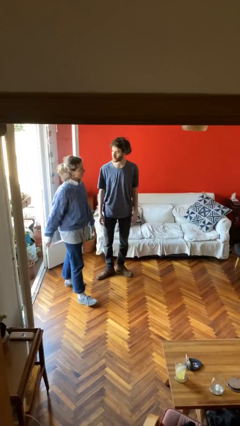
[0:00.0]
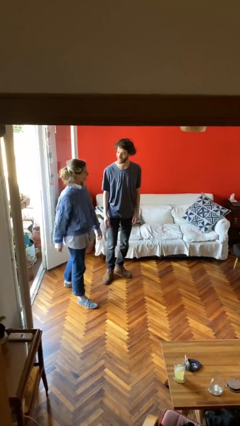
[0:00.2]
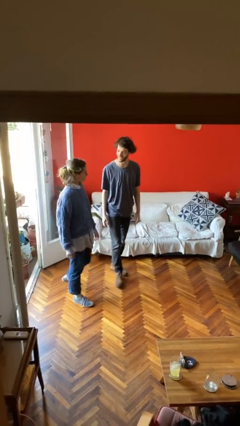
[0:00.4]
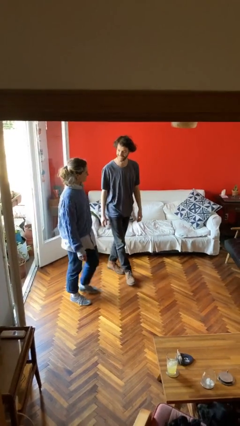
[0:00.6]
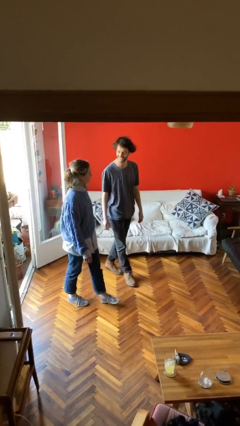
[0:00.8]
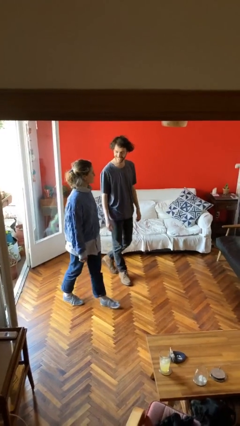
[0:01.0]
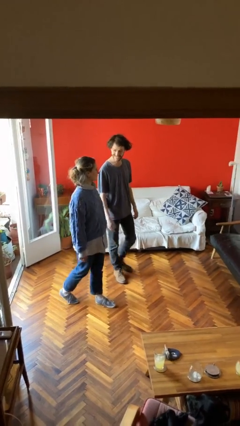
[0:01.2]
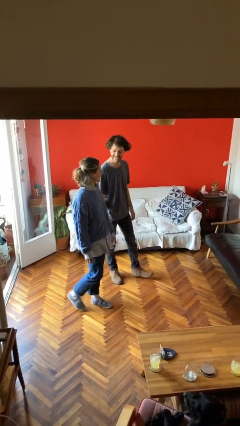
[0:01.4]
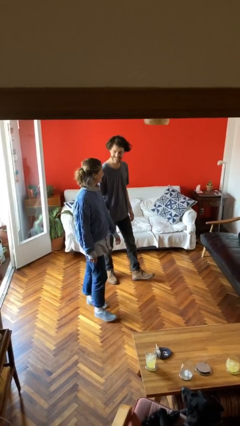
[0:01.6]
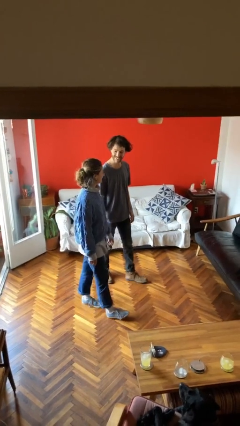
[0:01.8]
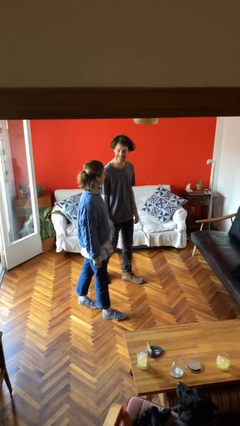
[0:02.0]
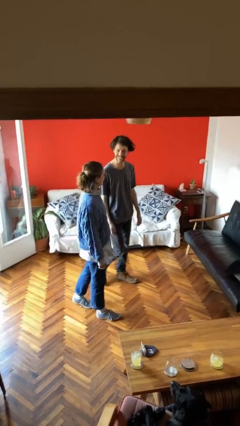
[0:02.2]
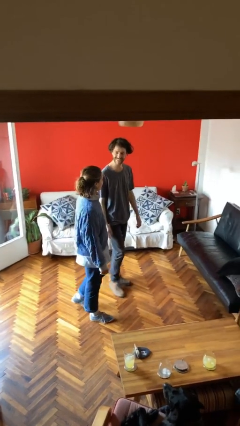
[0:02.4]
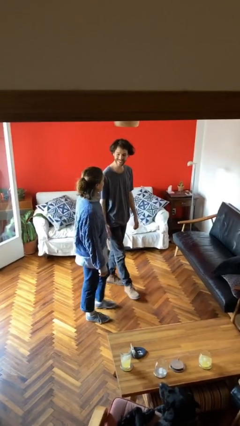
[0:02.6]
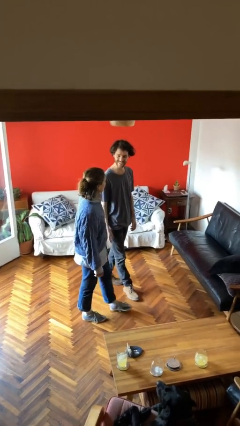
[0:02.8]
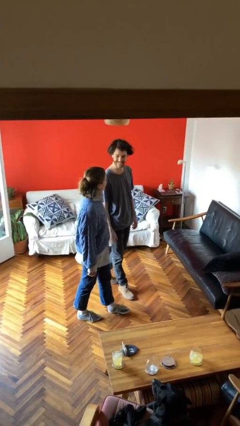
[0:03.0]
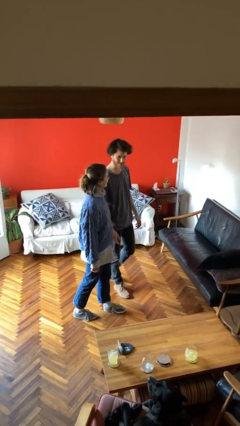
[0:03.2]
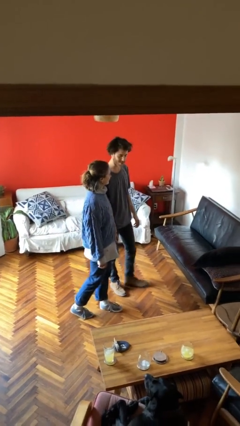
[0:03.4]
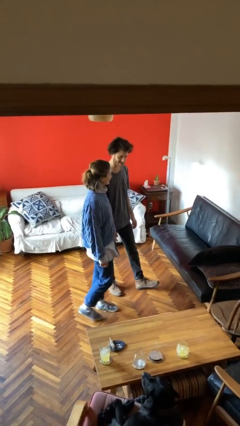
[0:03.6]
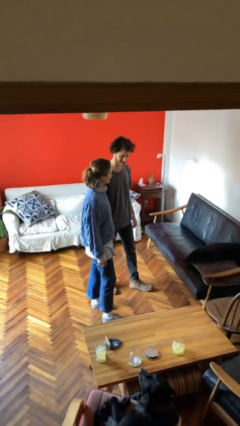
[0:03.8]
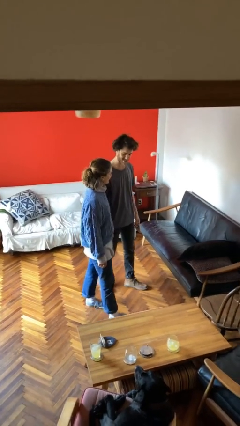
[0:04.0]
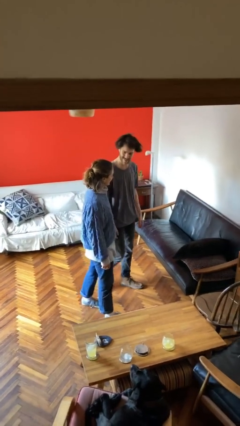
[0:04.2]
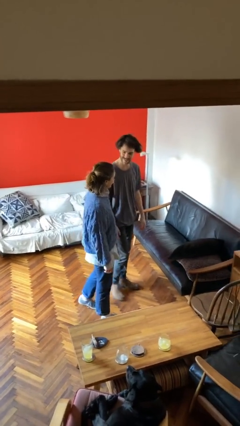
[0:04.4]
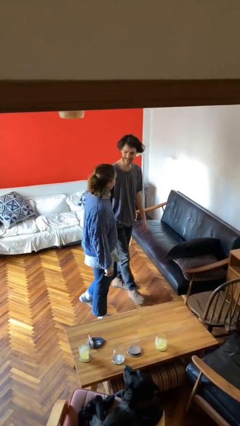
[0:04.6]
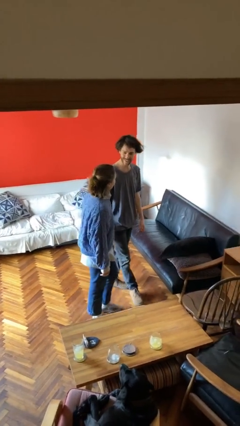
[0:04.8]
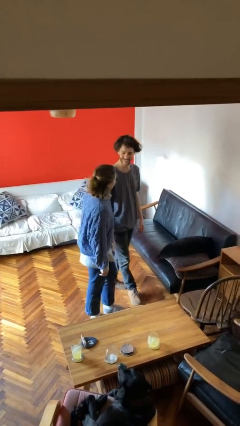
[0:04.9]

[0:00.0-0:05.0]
person talks to person

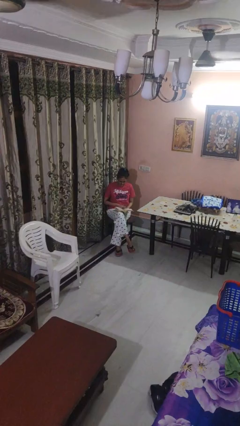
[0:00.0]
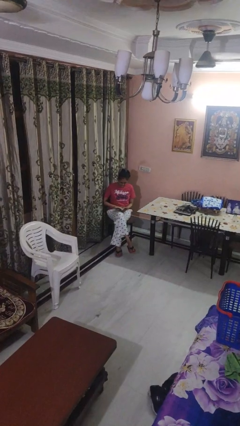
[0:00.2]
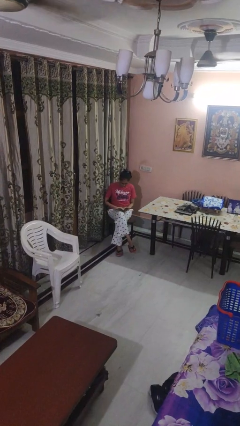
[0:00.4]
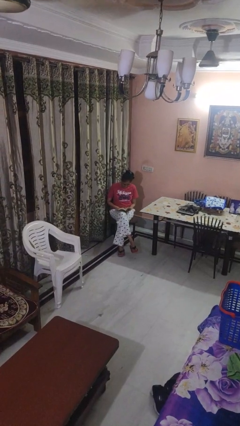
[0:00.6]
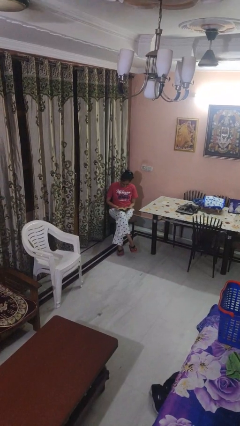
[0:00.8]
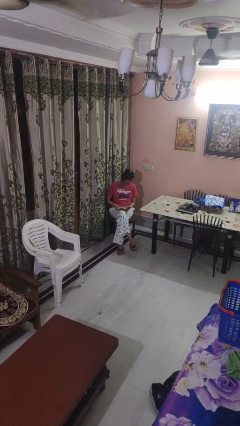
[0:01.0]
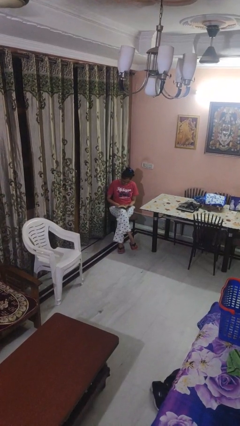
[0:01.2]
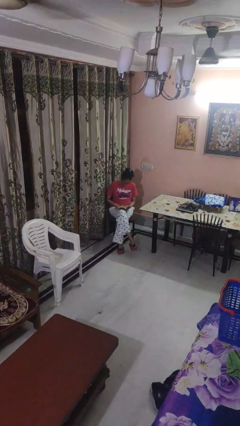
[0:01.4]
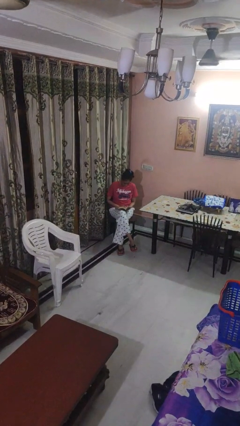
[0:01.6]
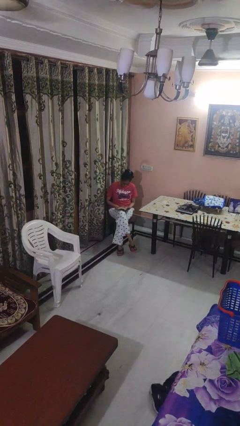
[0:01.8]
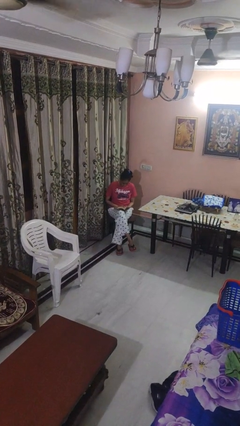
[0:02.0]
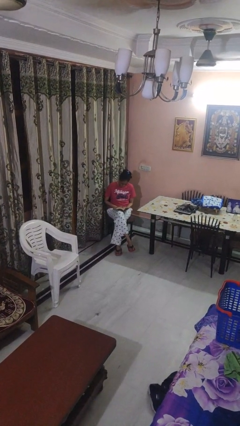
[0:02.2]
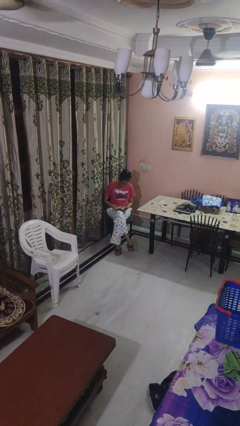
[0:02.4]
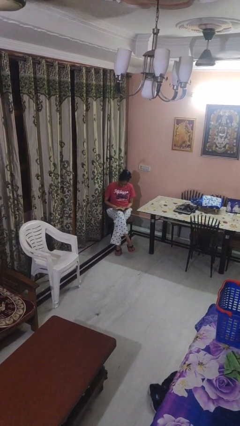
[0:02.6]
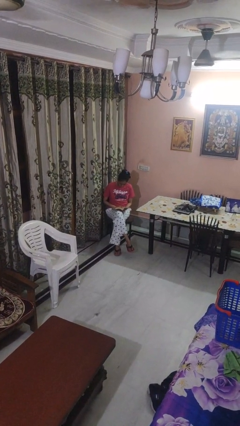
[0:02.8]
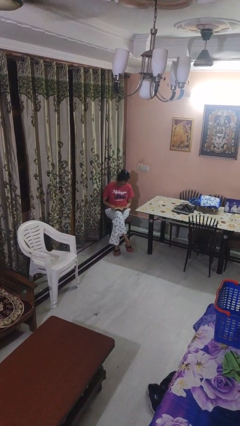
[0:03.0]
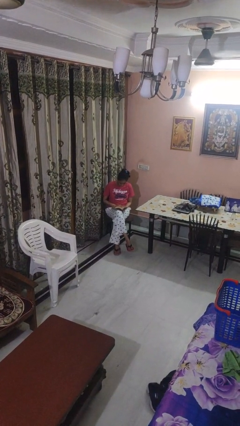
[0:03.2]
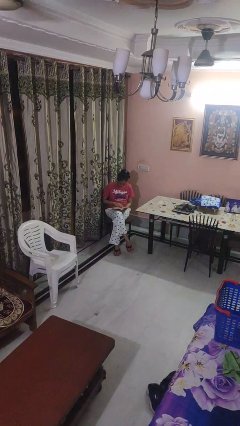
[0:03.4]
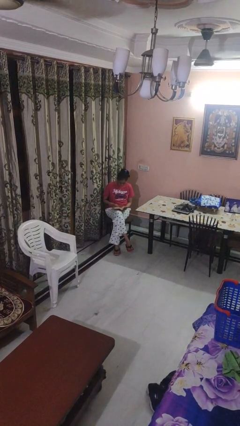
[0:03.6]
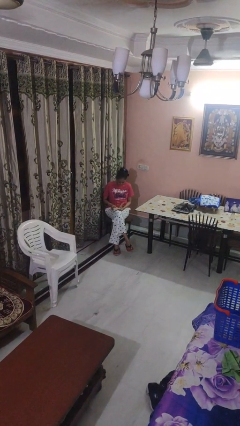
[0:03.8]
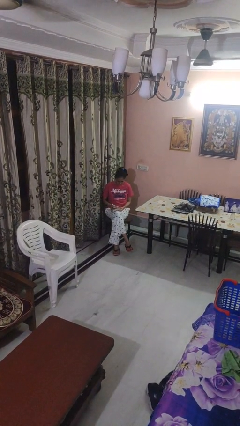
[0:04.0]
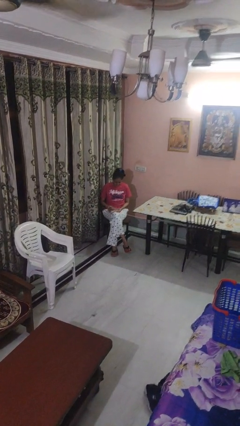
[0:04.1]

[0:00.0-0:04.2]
person reads book

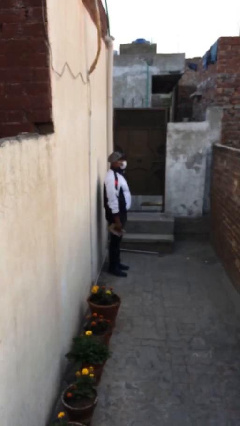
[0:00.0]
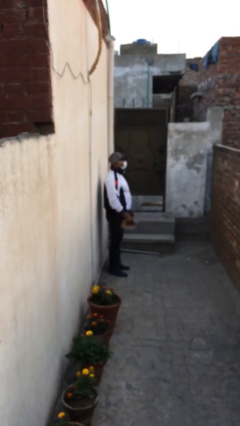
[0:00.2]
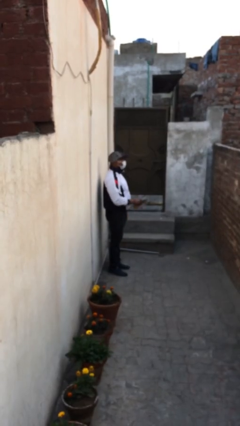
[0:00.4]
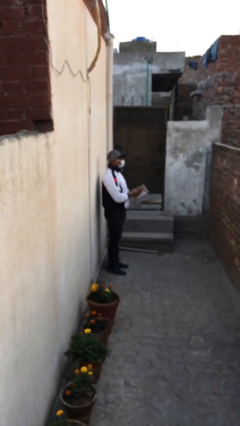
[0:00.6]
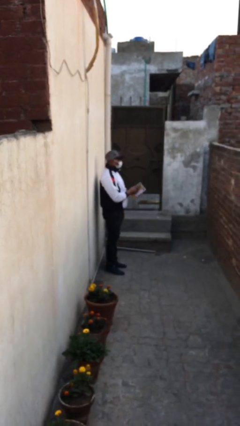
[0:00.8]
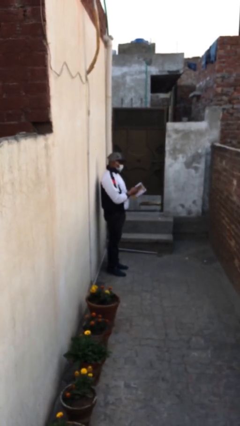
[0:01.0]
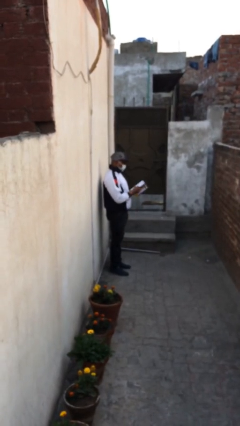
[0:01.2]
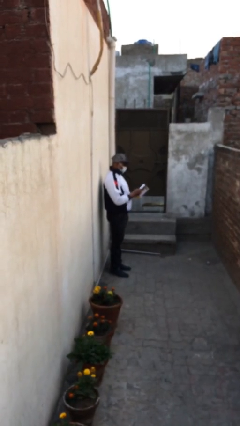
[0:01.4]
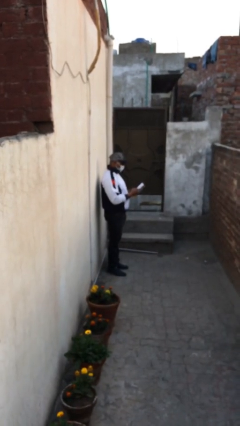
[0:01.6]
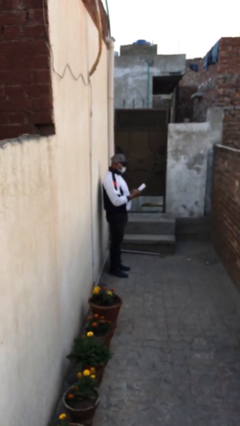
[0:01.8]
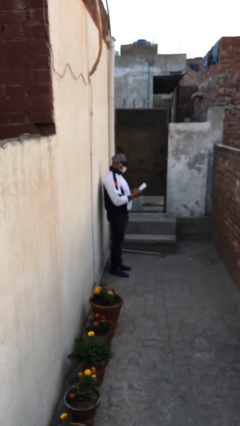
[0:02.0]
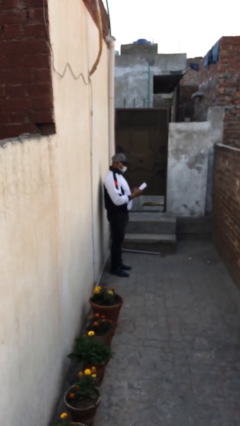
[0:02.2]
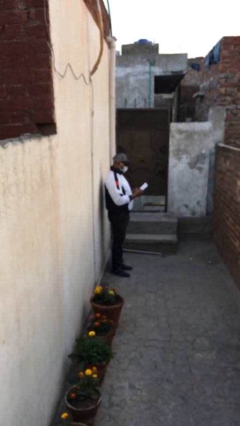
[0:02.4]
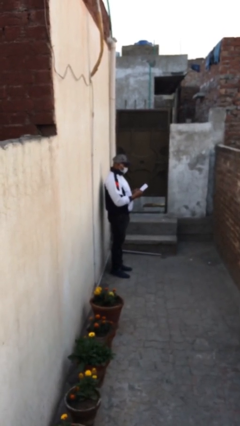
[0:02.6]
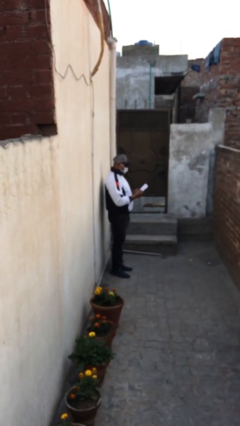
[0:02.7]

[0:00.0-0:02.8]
person reads document

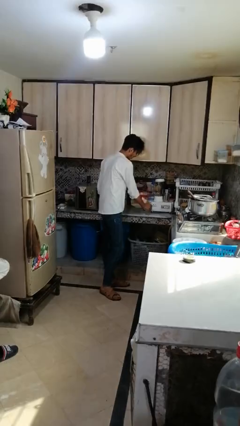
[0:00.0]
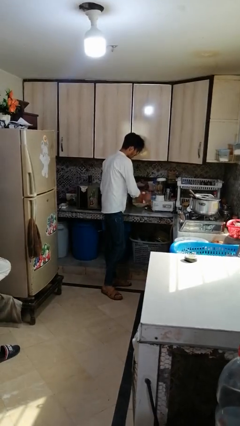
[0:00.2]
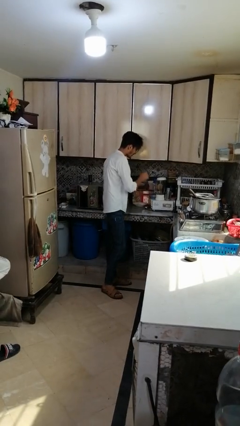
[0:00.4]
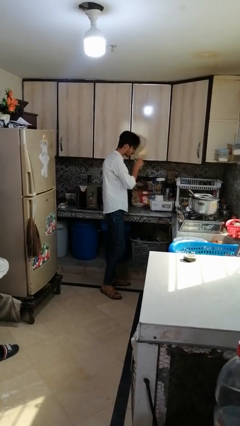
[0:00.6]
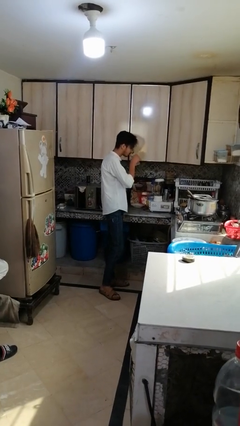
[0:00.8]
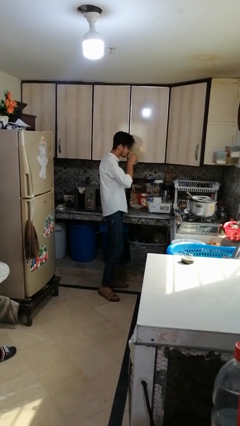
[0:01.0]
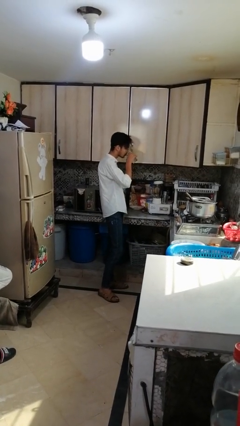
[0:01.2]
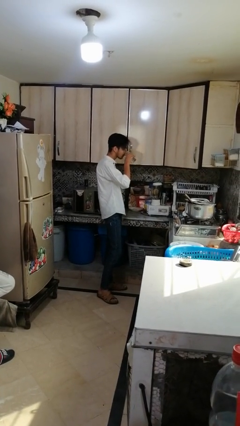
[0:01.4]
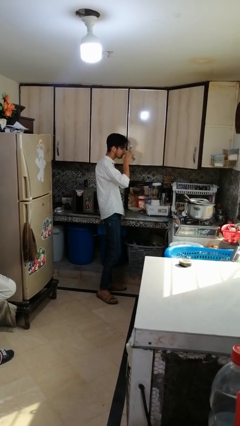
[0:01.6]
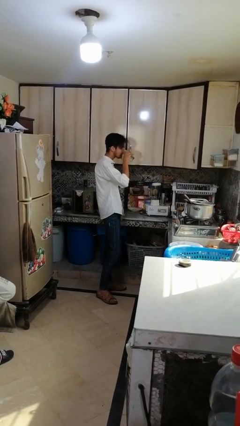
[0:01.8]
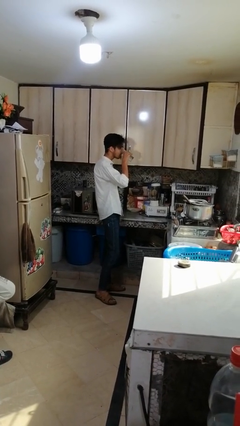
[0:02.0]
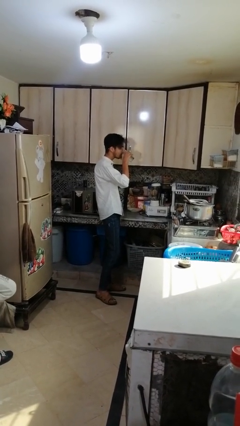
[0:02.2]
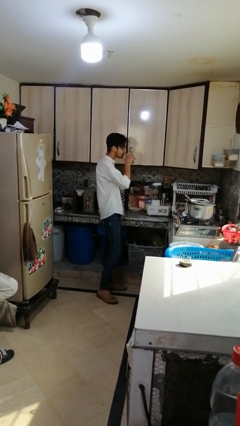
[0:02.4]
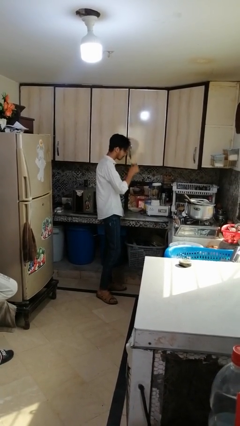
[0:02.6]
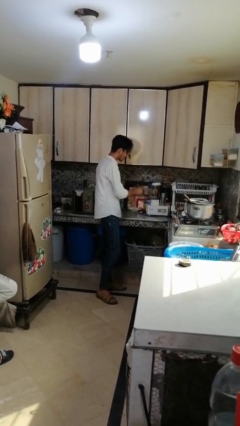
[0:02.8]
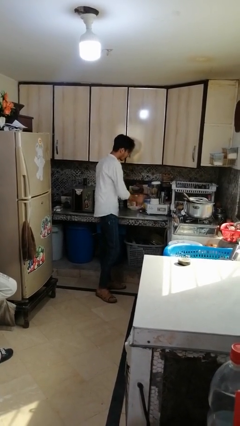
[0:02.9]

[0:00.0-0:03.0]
person drinks from cup

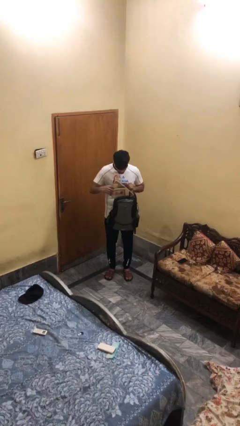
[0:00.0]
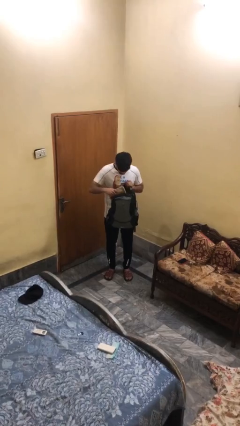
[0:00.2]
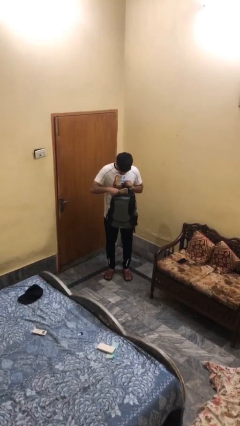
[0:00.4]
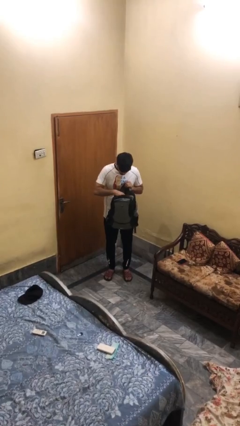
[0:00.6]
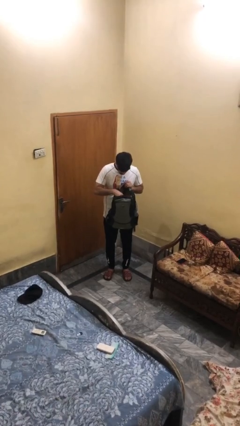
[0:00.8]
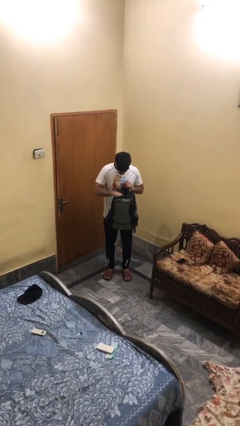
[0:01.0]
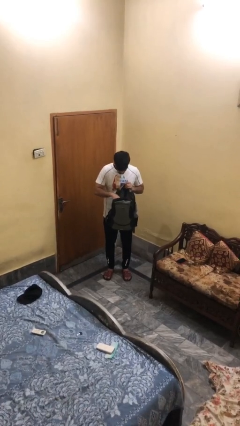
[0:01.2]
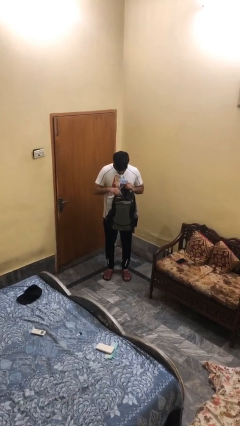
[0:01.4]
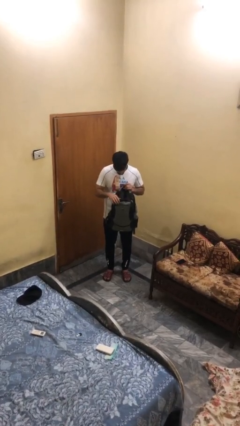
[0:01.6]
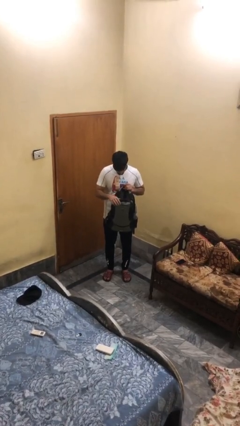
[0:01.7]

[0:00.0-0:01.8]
person puts object into backpack

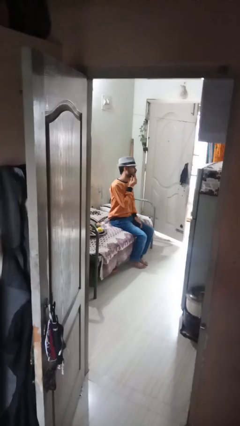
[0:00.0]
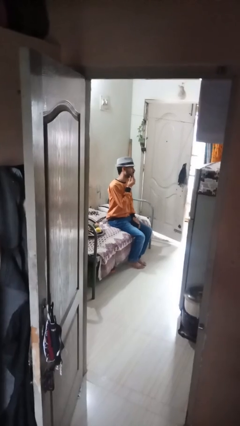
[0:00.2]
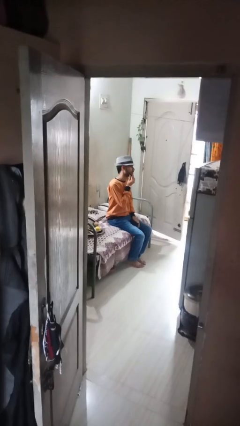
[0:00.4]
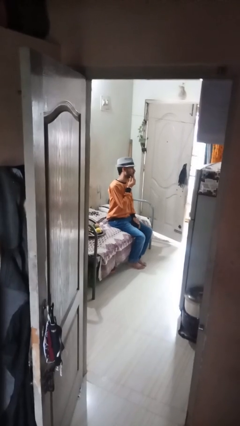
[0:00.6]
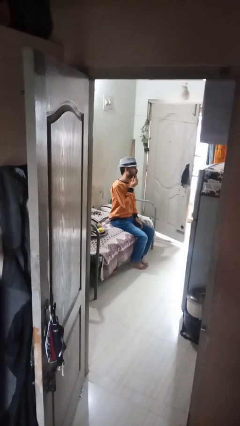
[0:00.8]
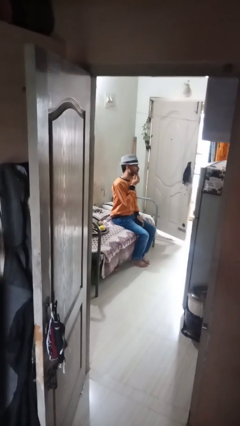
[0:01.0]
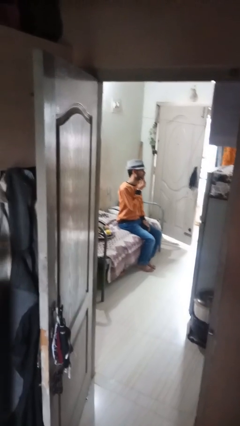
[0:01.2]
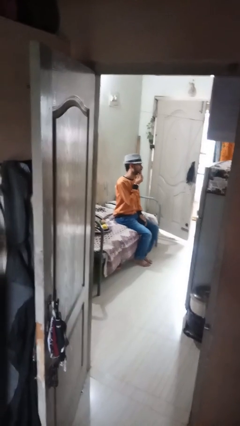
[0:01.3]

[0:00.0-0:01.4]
person strokes chin
